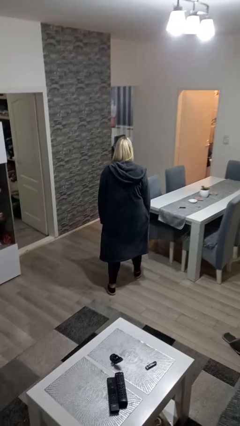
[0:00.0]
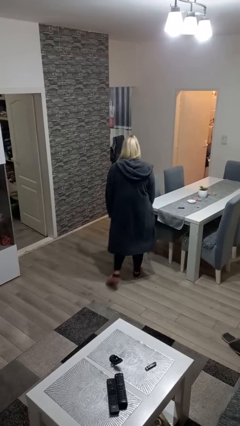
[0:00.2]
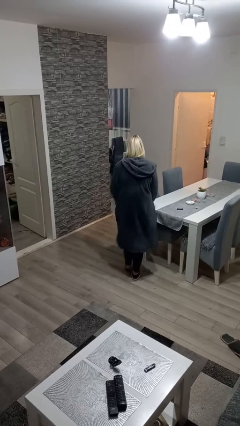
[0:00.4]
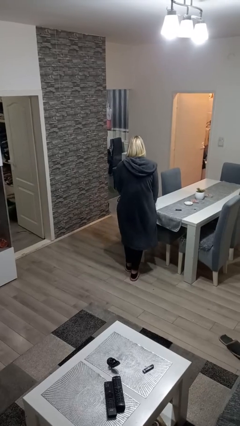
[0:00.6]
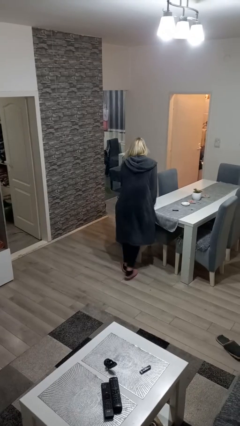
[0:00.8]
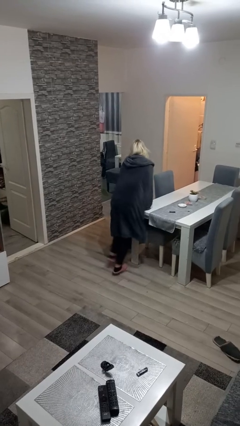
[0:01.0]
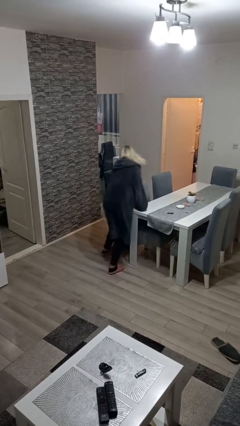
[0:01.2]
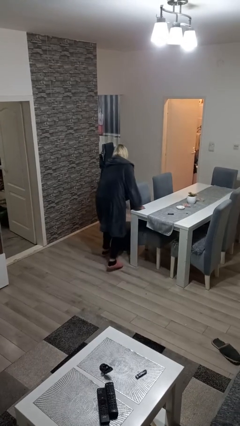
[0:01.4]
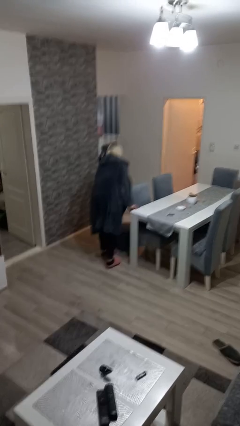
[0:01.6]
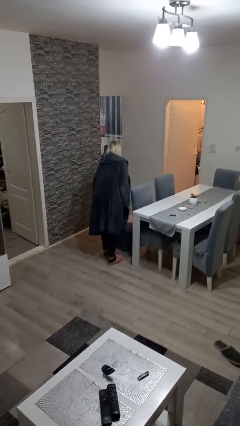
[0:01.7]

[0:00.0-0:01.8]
person bumps into table

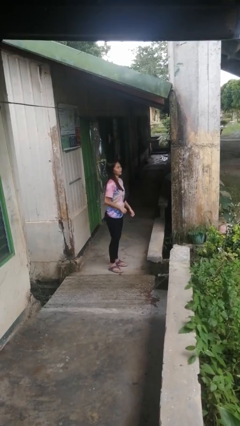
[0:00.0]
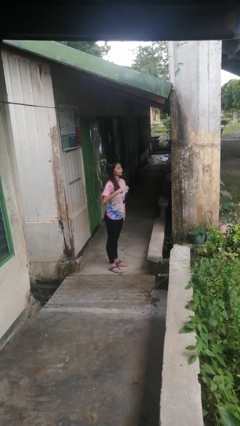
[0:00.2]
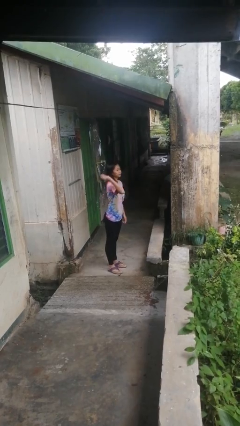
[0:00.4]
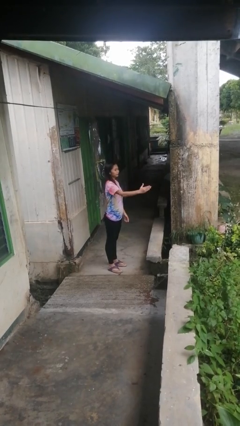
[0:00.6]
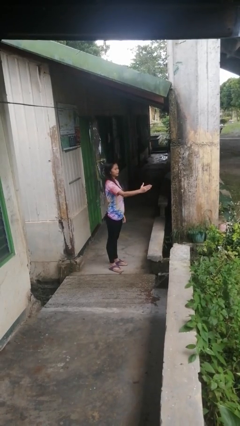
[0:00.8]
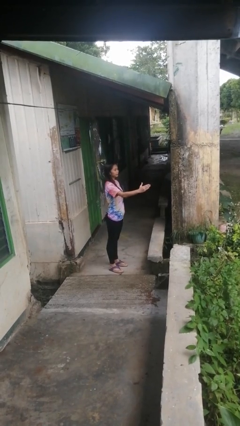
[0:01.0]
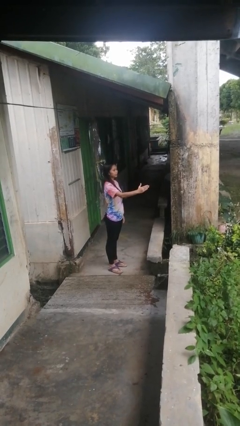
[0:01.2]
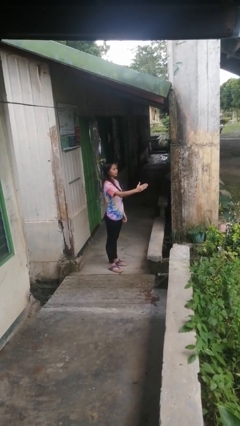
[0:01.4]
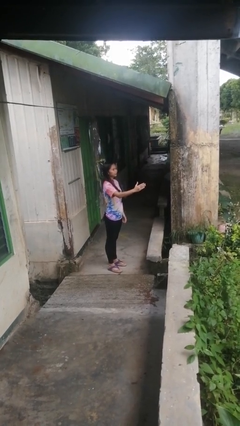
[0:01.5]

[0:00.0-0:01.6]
person karate chop

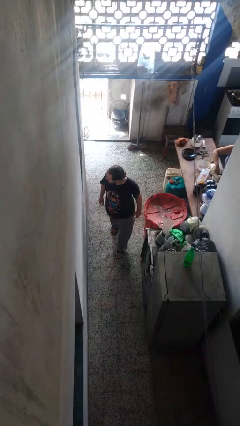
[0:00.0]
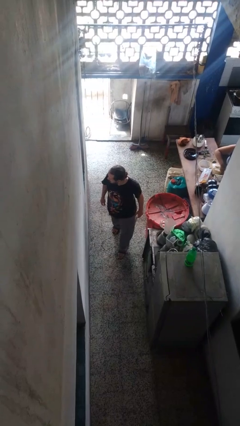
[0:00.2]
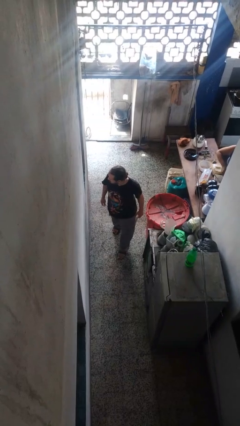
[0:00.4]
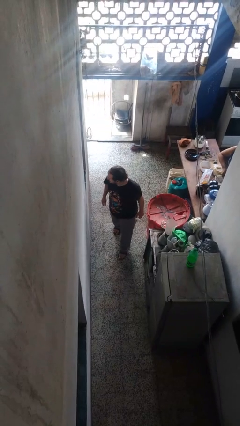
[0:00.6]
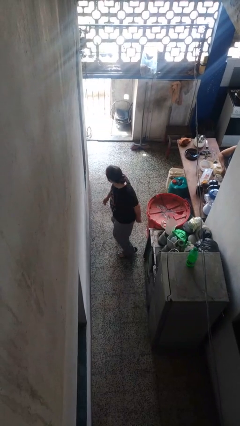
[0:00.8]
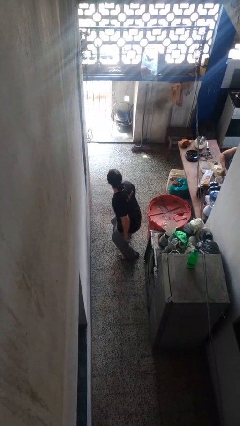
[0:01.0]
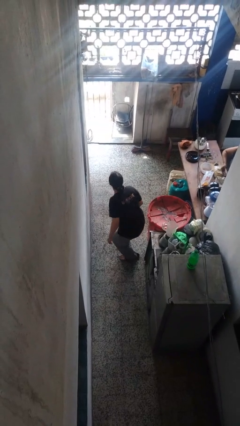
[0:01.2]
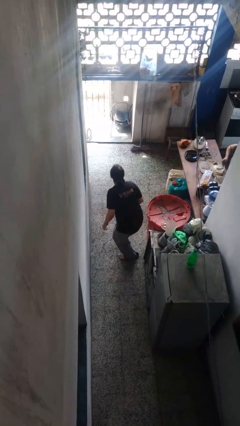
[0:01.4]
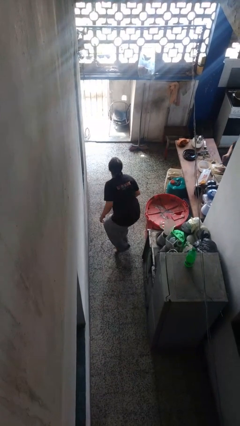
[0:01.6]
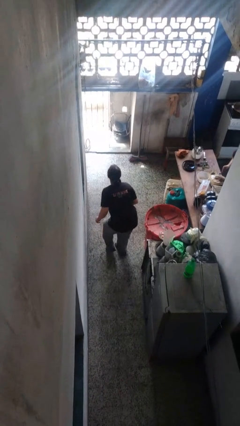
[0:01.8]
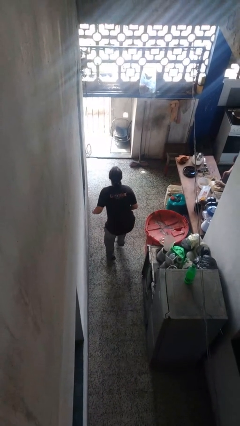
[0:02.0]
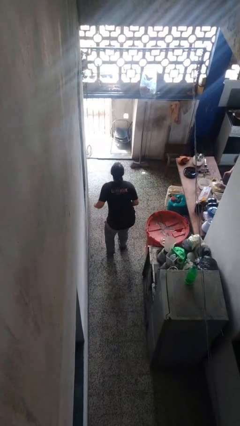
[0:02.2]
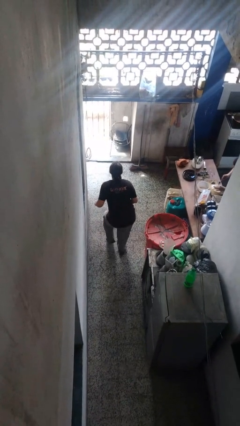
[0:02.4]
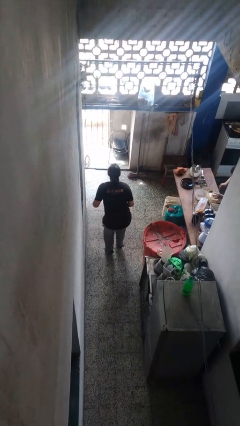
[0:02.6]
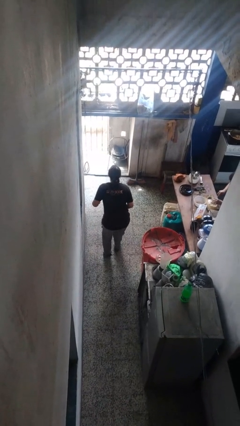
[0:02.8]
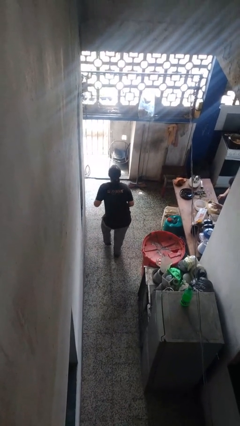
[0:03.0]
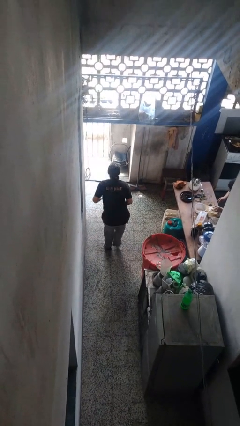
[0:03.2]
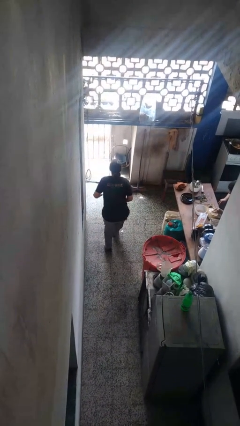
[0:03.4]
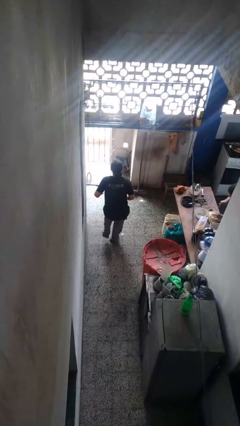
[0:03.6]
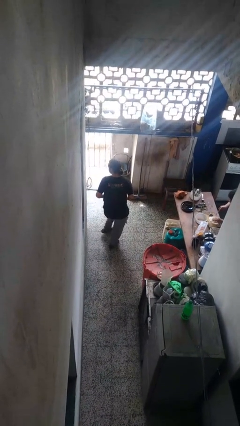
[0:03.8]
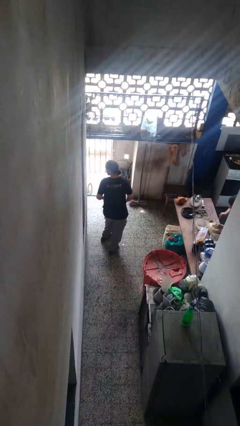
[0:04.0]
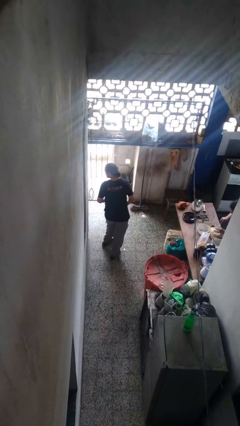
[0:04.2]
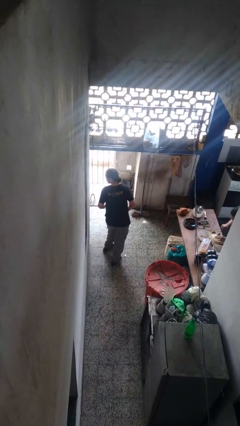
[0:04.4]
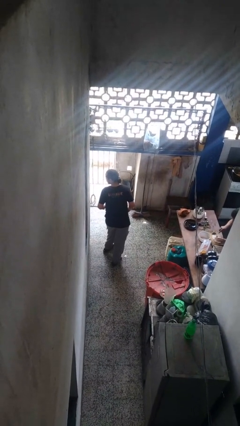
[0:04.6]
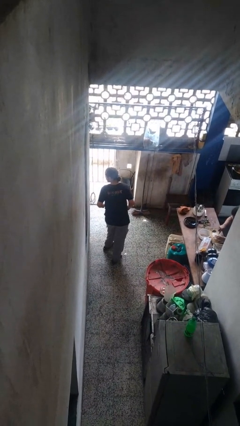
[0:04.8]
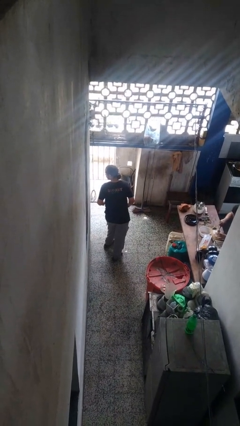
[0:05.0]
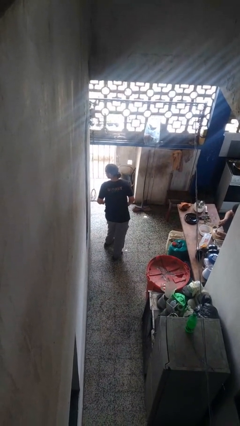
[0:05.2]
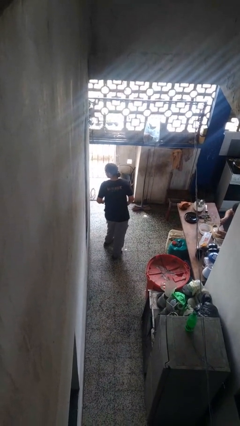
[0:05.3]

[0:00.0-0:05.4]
person walks tiptoe

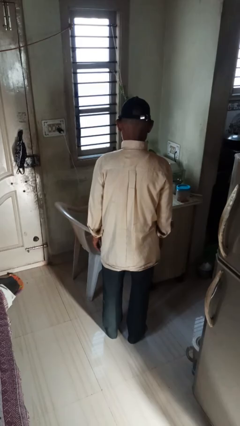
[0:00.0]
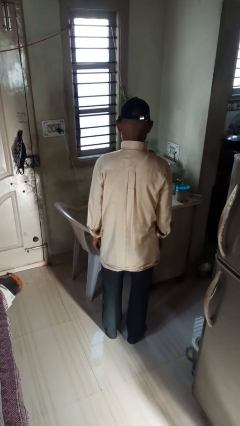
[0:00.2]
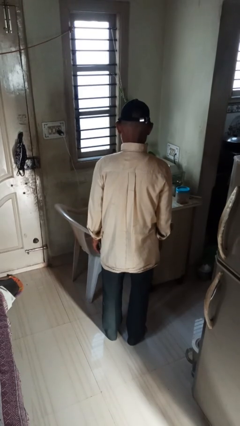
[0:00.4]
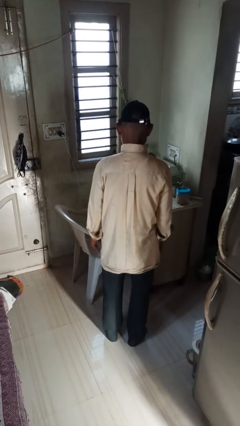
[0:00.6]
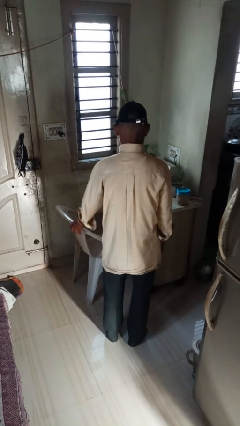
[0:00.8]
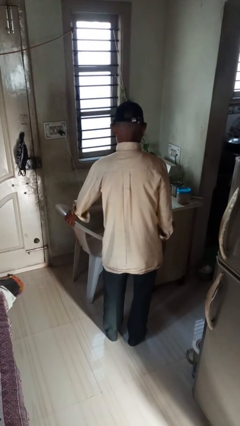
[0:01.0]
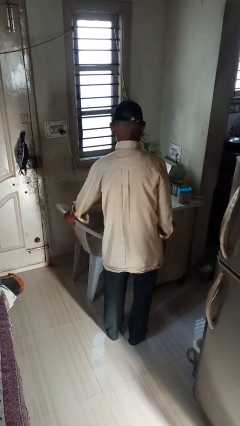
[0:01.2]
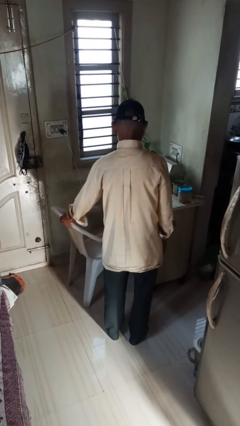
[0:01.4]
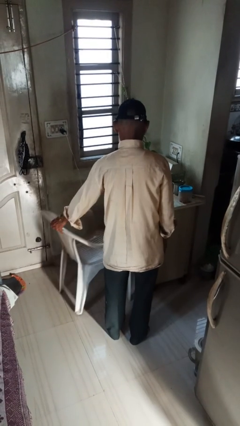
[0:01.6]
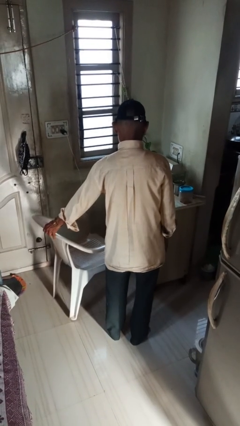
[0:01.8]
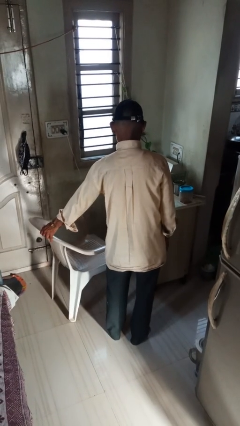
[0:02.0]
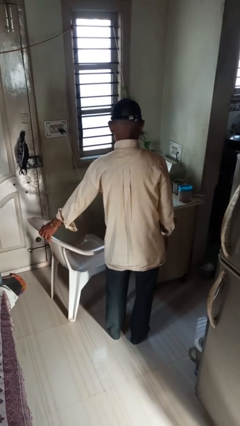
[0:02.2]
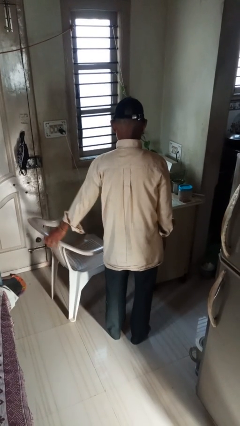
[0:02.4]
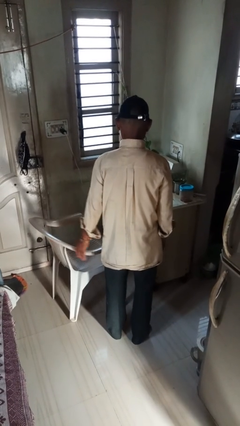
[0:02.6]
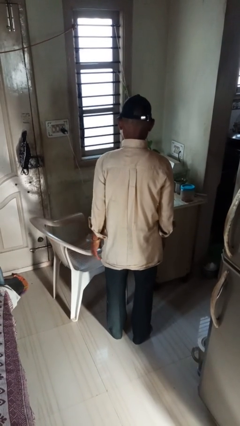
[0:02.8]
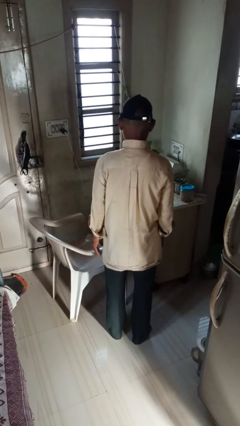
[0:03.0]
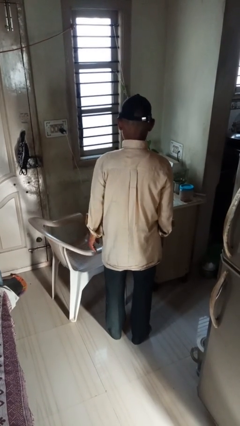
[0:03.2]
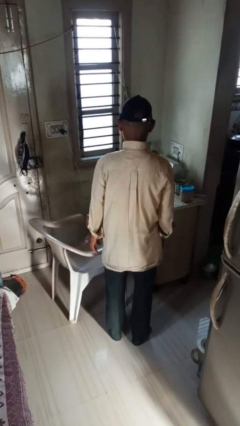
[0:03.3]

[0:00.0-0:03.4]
person pulls out chair

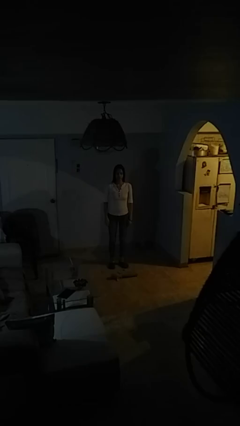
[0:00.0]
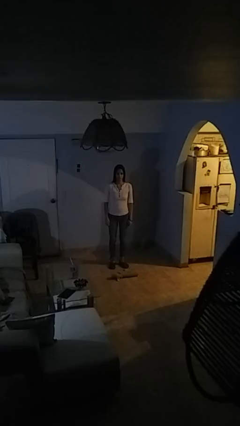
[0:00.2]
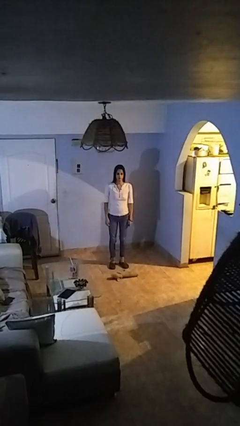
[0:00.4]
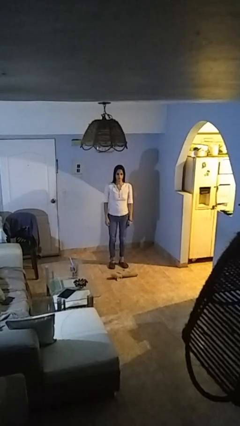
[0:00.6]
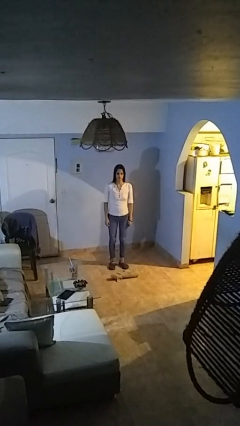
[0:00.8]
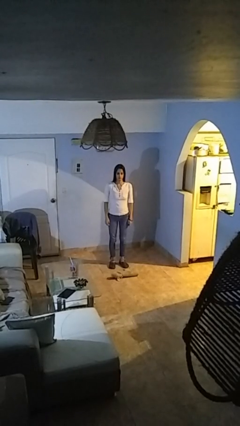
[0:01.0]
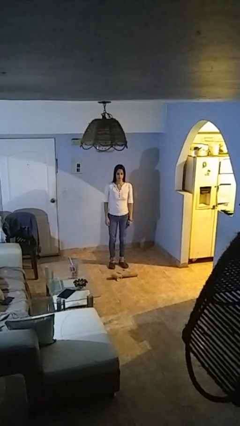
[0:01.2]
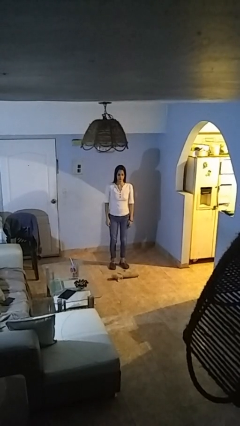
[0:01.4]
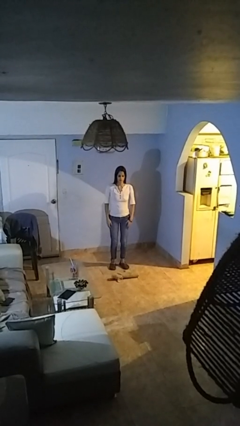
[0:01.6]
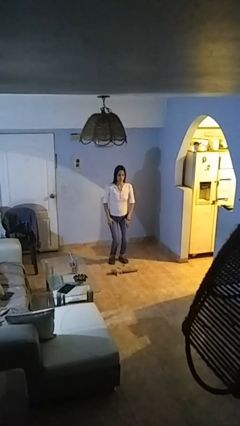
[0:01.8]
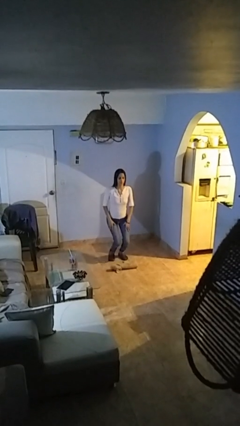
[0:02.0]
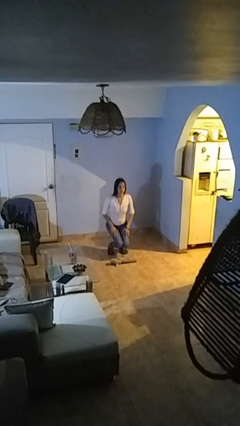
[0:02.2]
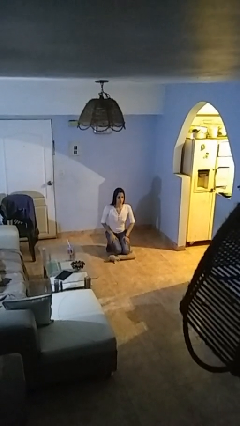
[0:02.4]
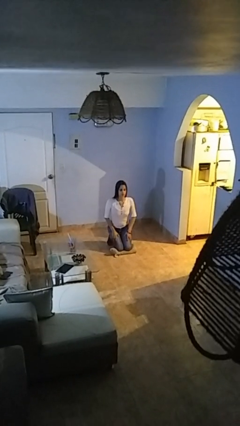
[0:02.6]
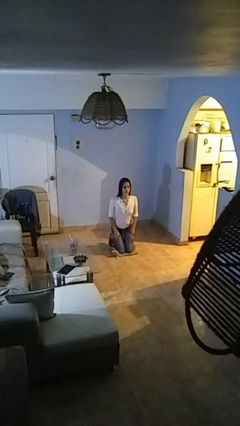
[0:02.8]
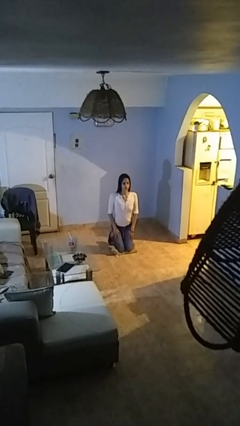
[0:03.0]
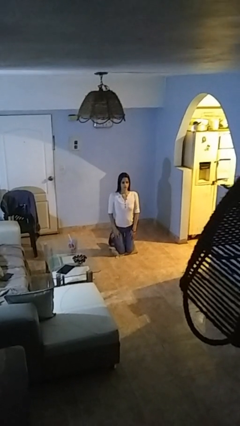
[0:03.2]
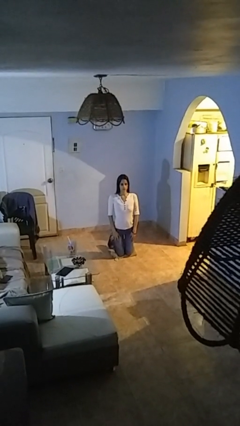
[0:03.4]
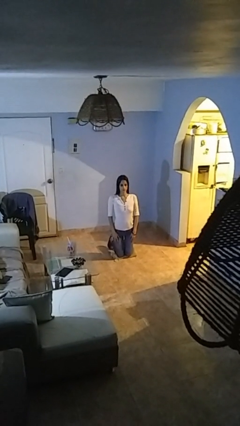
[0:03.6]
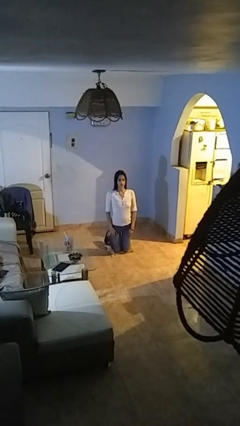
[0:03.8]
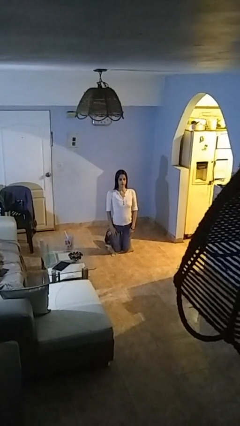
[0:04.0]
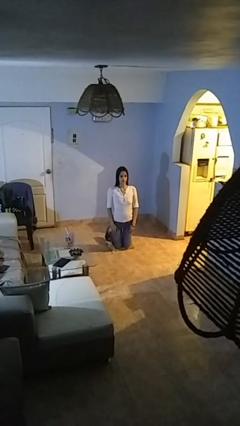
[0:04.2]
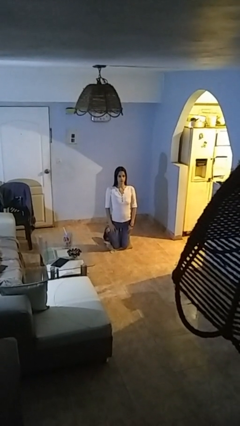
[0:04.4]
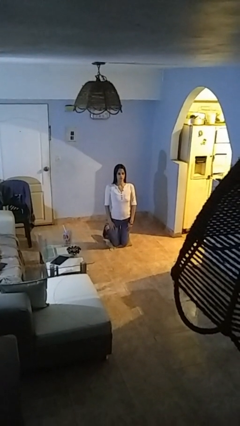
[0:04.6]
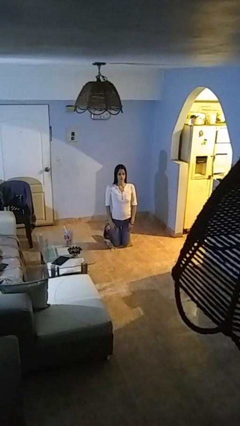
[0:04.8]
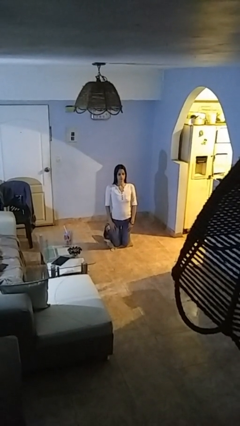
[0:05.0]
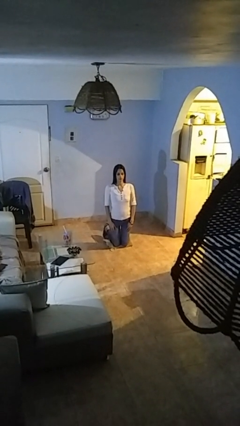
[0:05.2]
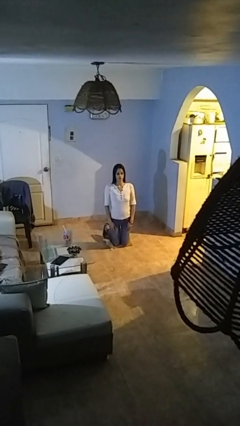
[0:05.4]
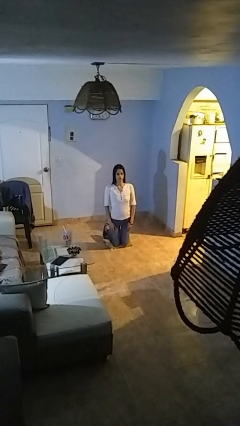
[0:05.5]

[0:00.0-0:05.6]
person kneels
